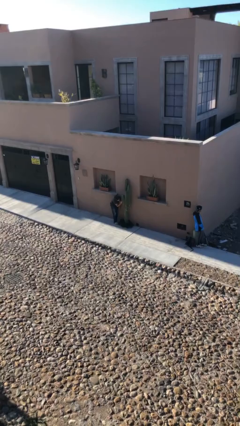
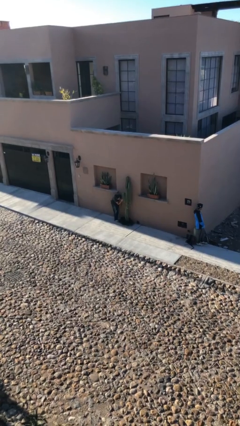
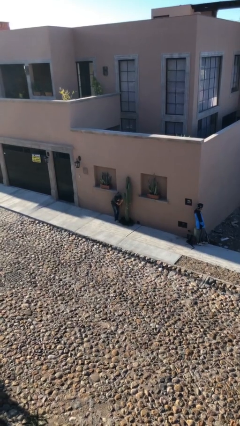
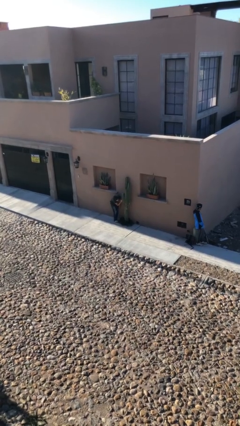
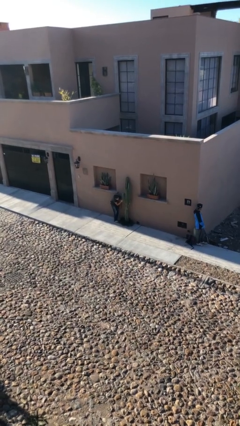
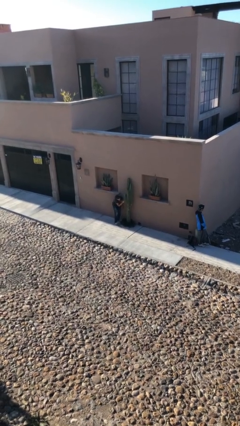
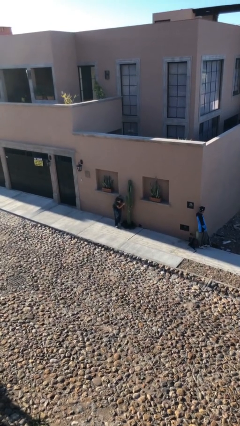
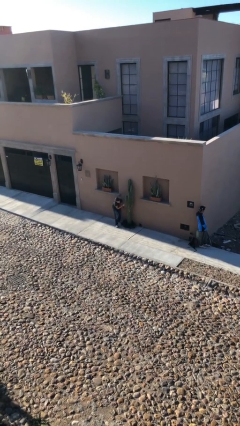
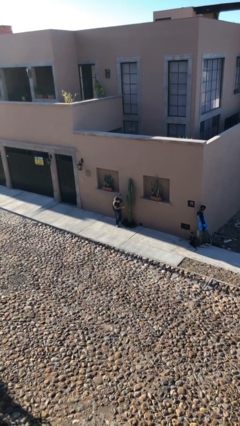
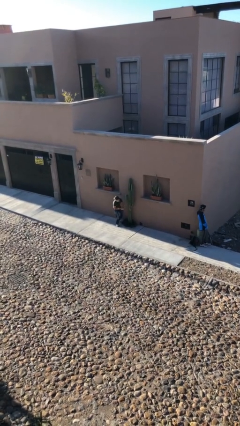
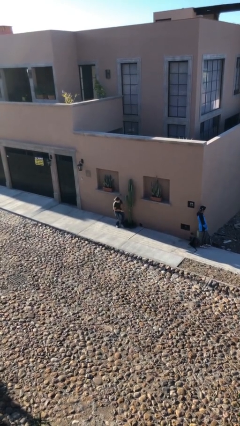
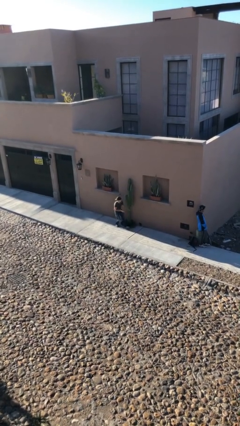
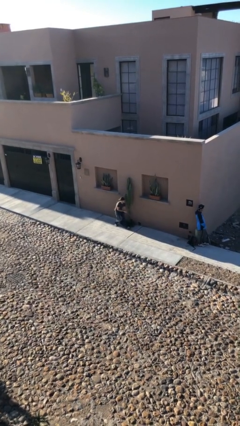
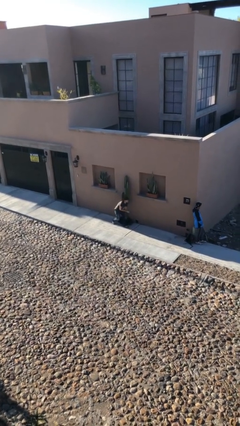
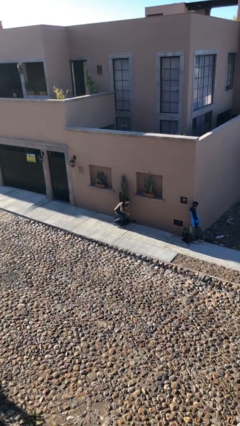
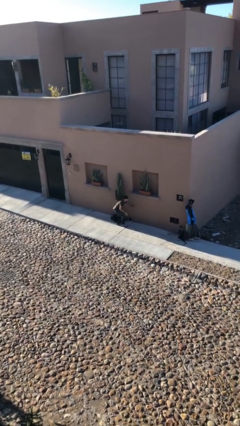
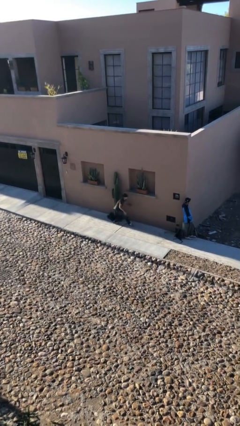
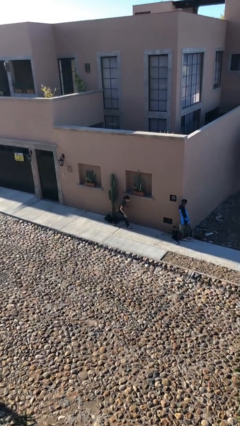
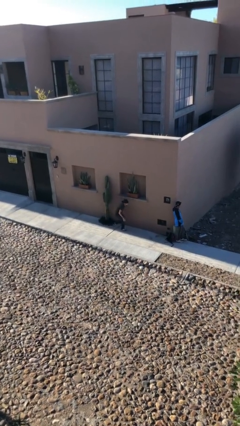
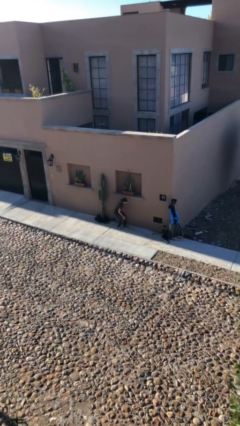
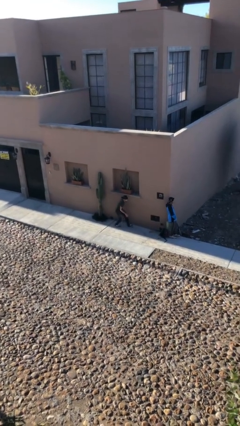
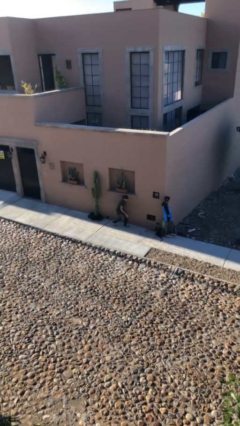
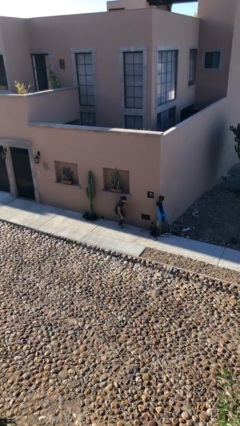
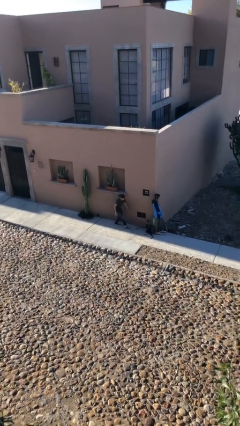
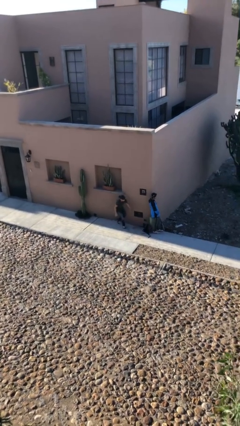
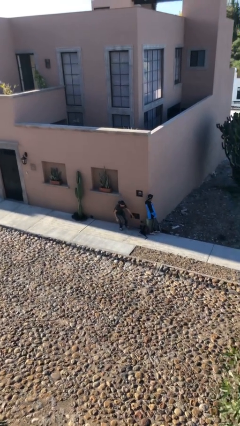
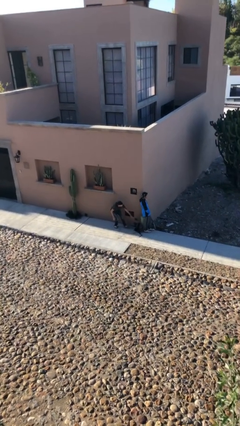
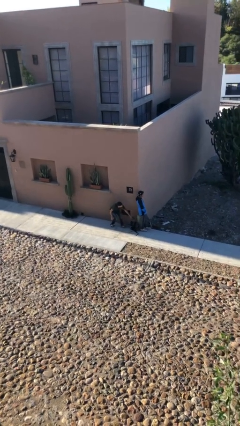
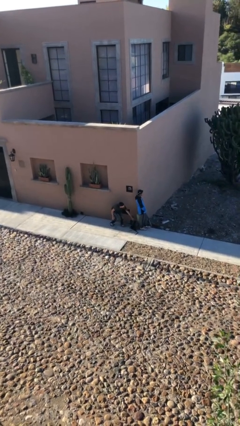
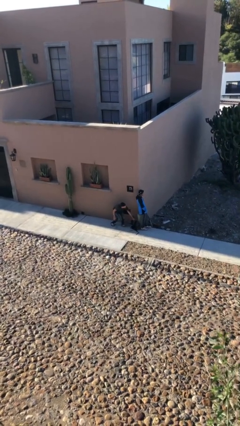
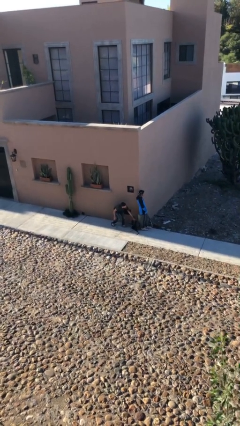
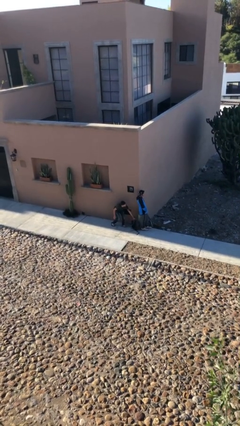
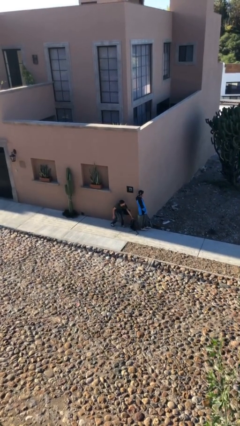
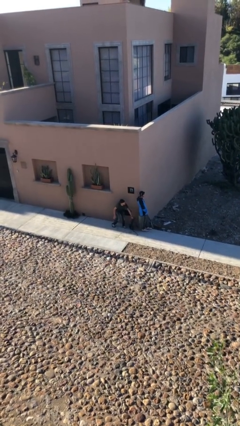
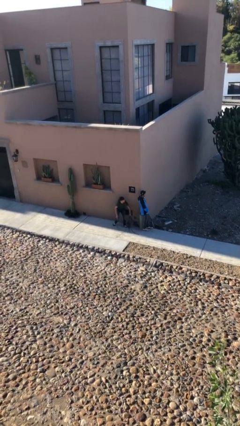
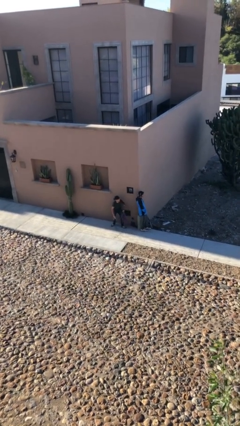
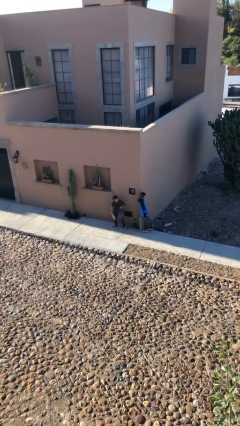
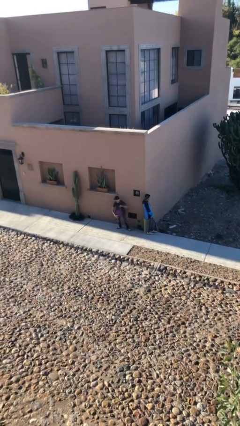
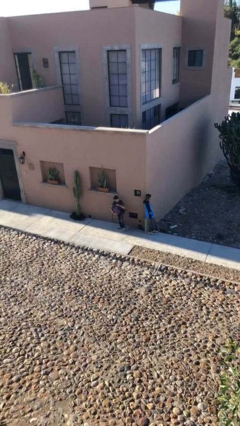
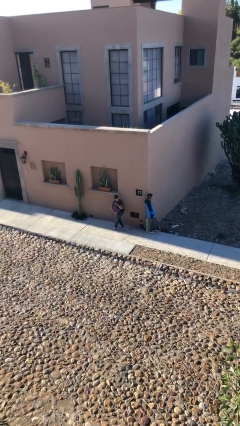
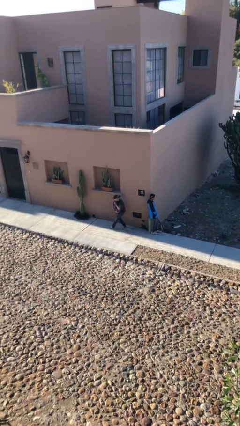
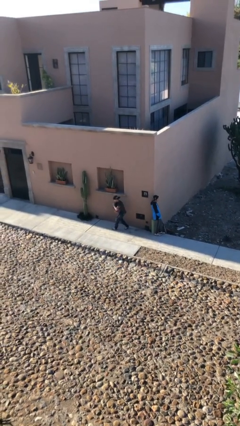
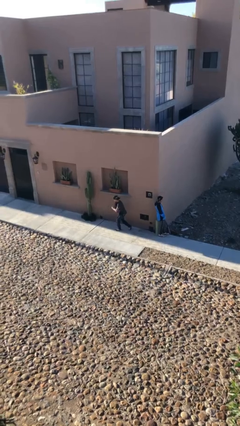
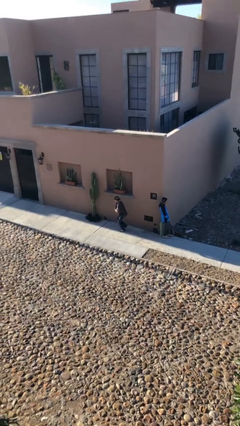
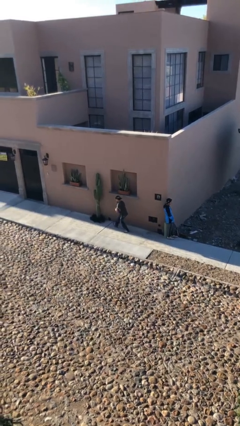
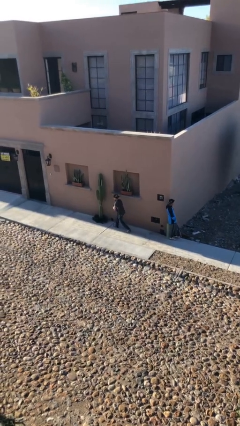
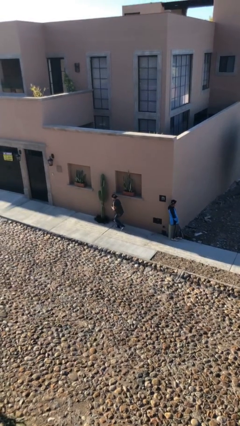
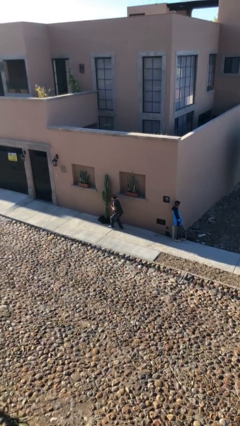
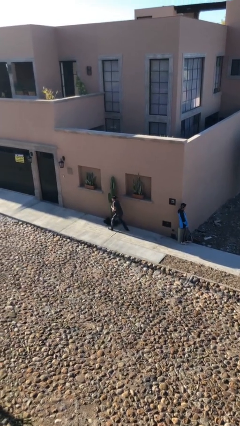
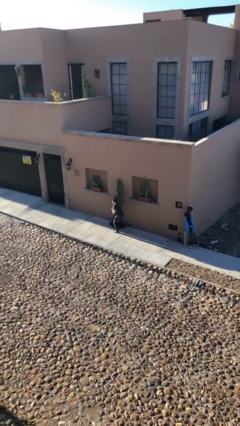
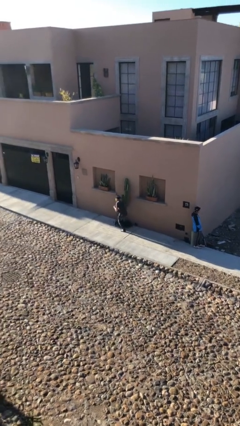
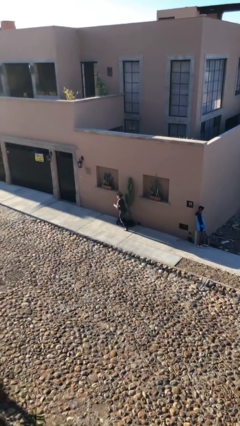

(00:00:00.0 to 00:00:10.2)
person steals object from person

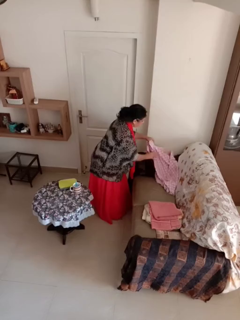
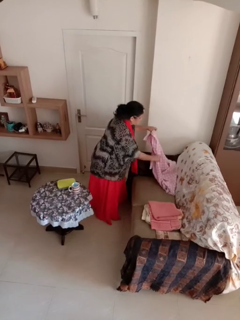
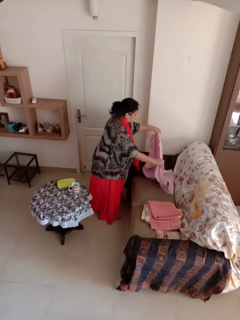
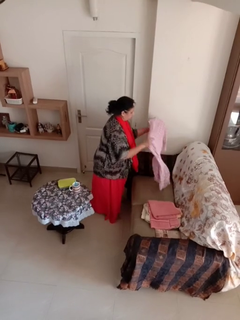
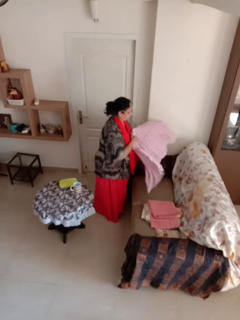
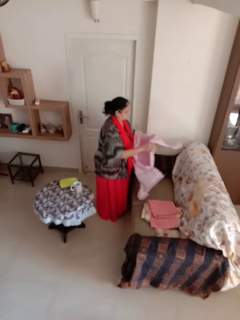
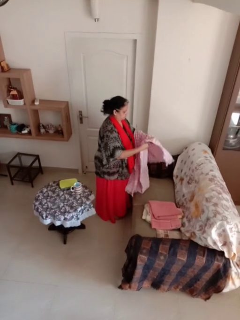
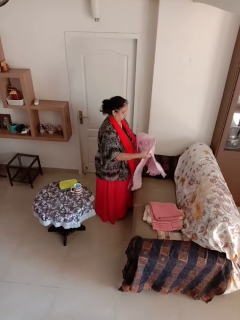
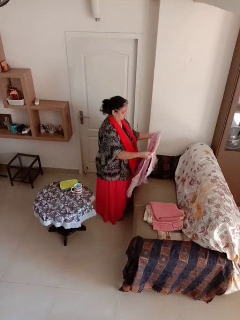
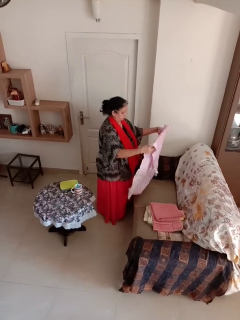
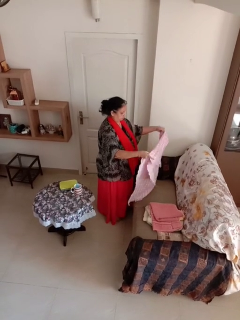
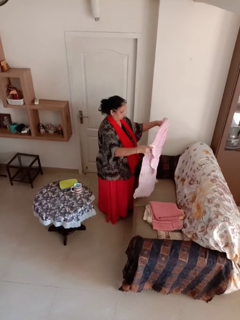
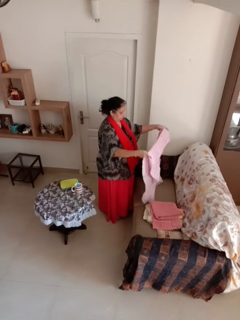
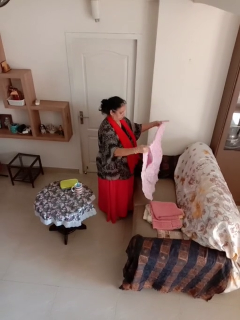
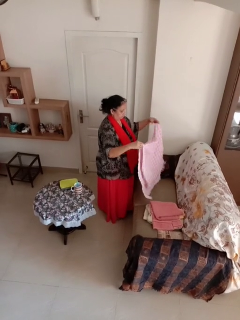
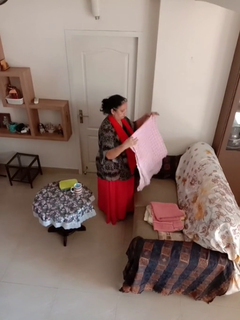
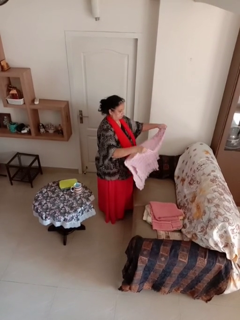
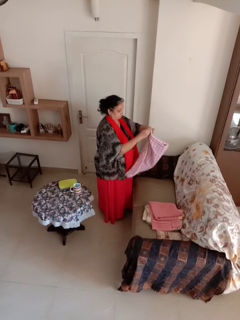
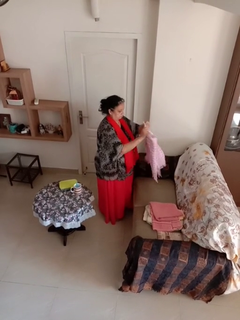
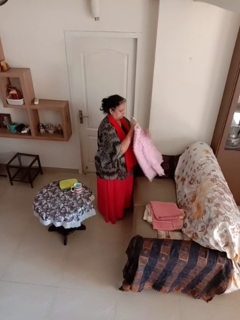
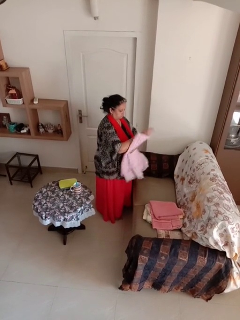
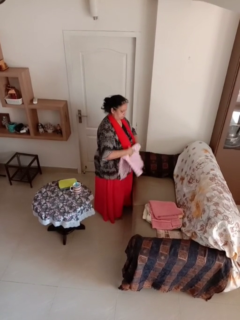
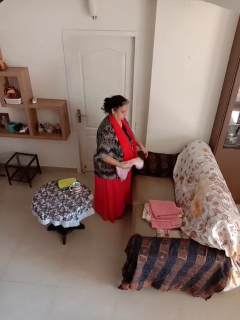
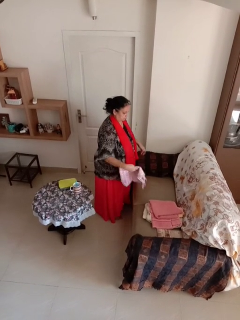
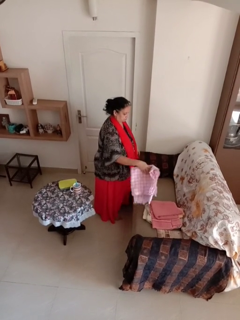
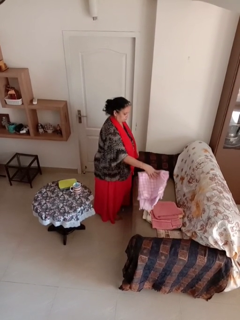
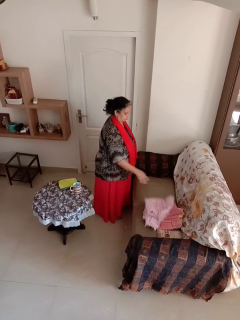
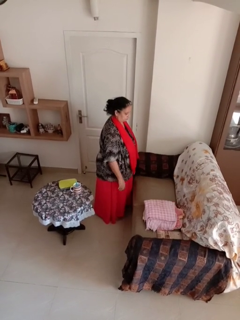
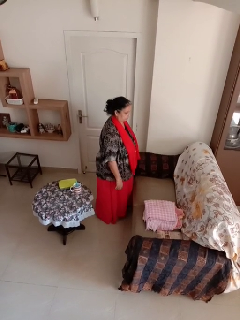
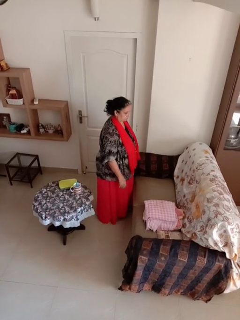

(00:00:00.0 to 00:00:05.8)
person folds towel

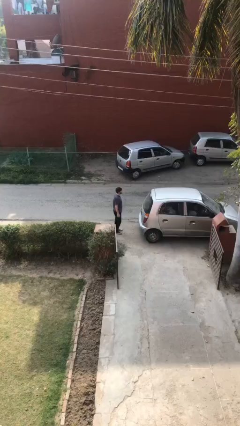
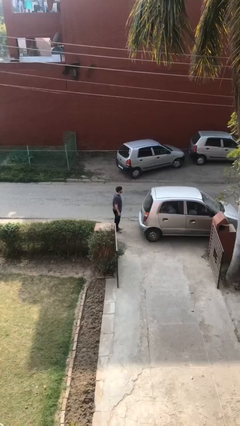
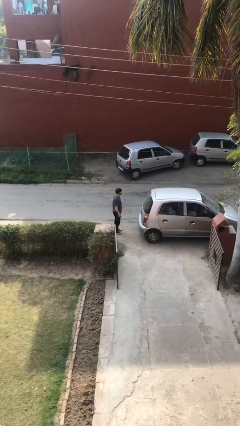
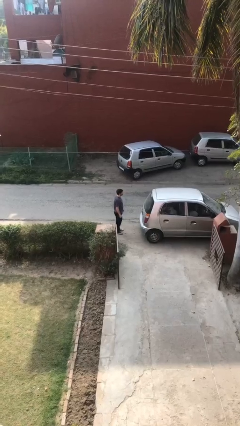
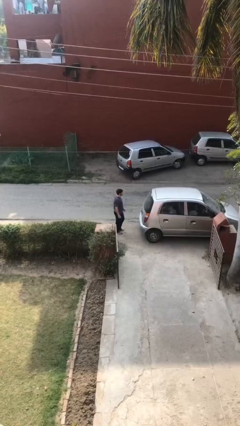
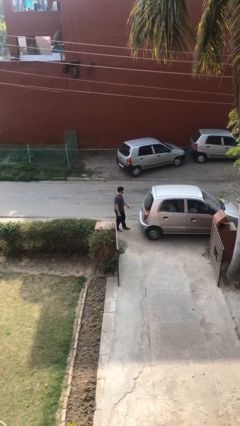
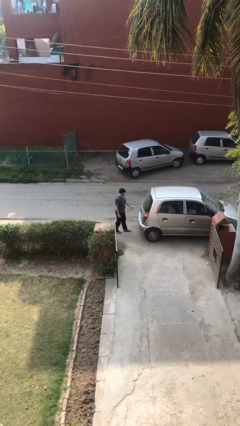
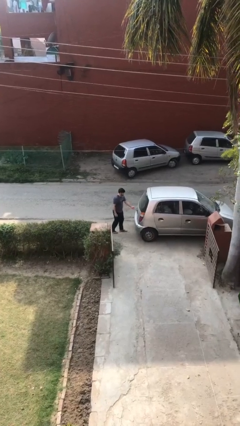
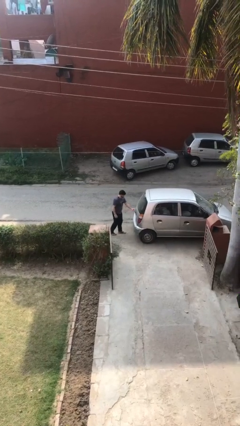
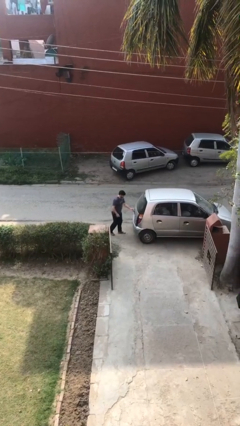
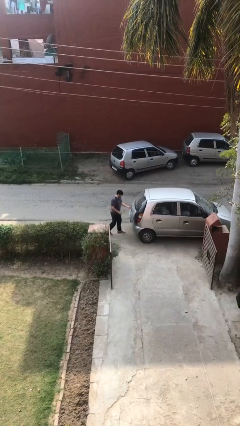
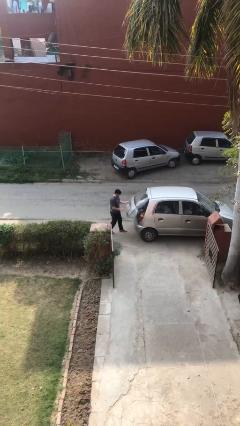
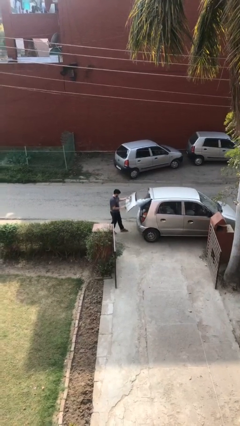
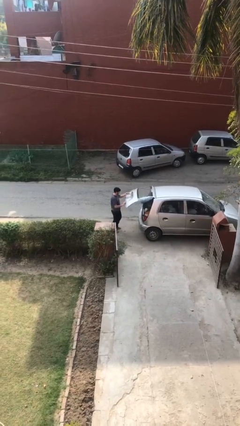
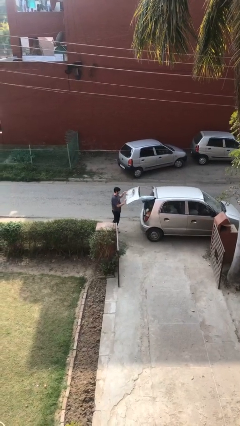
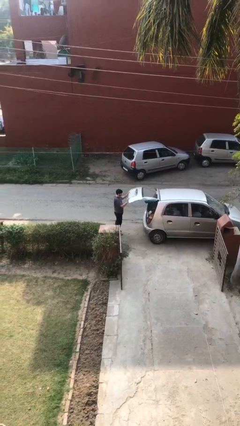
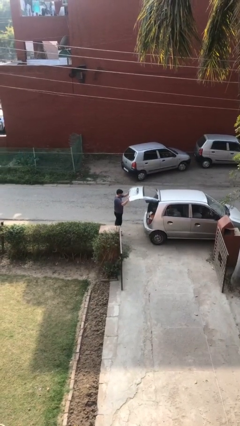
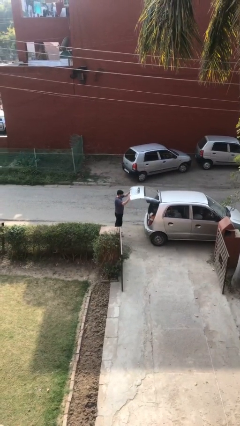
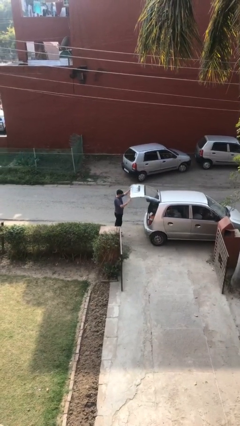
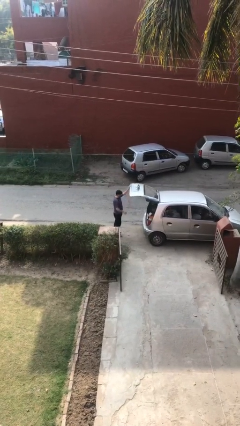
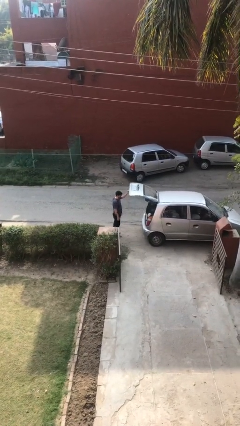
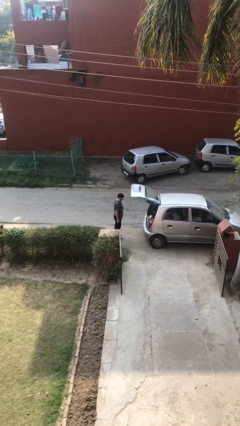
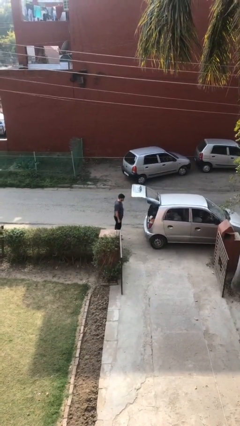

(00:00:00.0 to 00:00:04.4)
person opens car trunk
